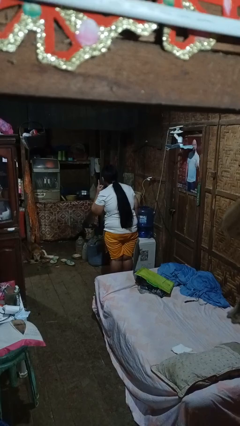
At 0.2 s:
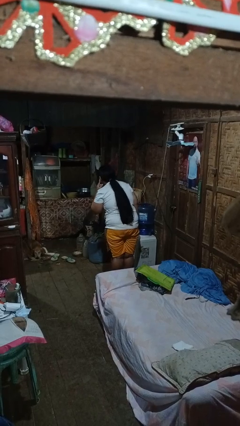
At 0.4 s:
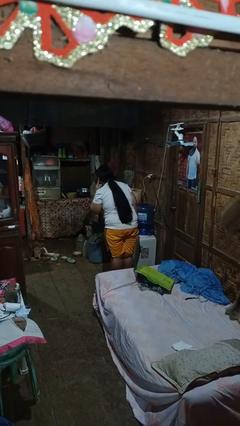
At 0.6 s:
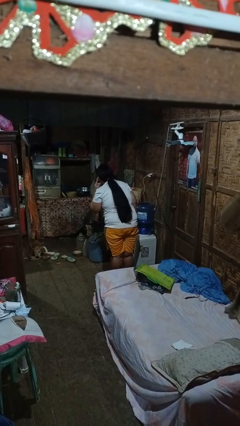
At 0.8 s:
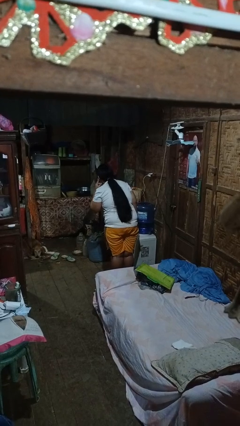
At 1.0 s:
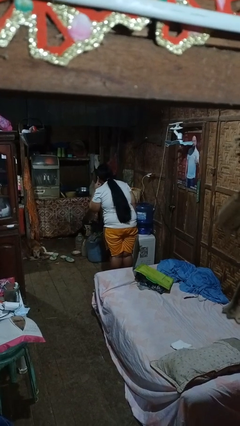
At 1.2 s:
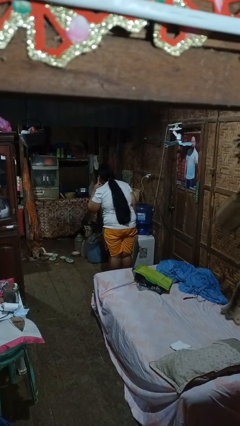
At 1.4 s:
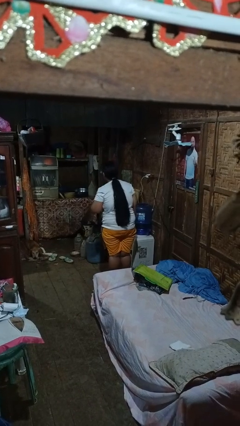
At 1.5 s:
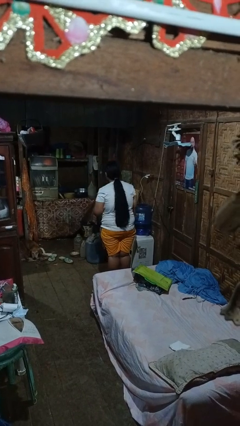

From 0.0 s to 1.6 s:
person gestures listen closely

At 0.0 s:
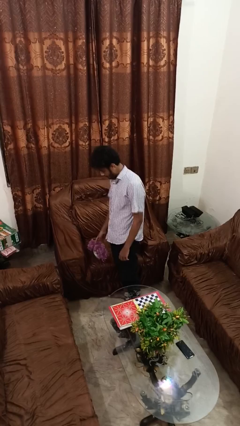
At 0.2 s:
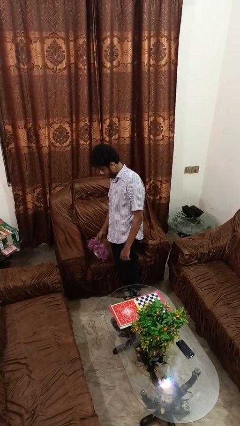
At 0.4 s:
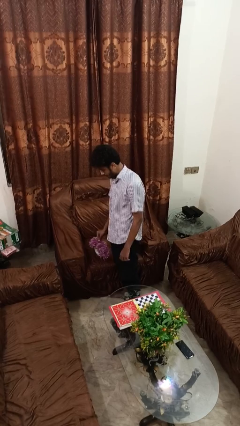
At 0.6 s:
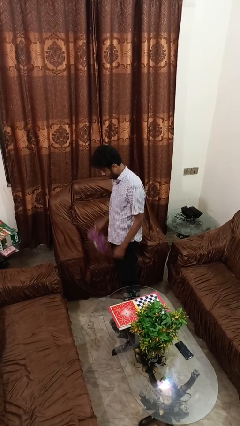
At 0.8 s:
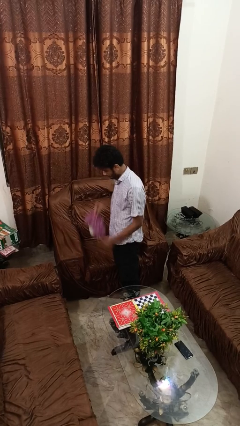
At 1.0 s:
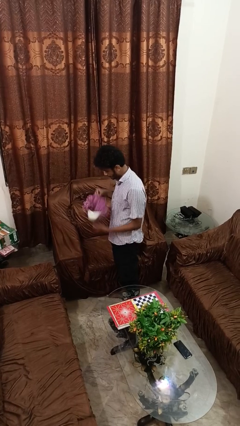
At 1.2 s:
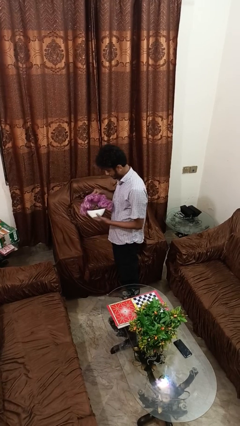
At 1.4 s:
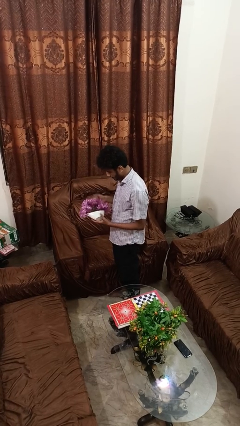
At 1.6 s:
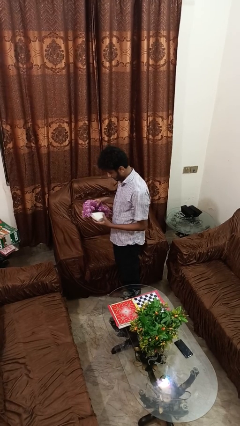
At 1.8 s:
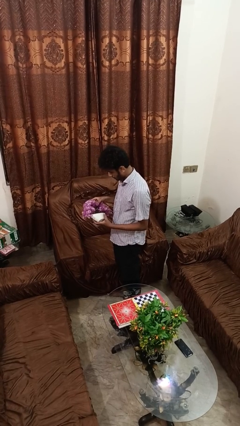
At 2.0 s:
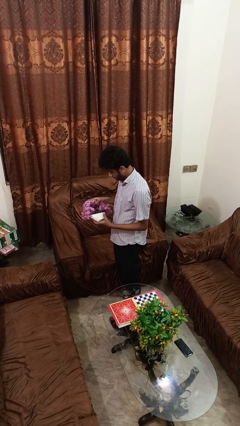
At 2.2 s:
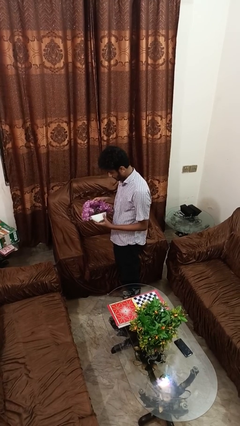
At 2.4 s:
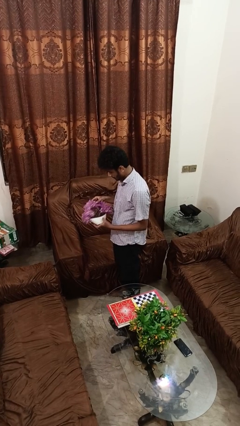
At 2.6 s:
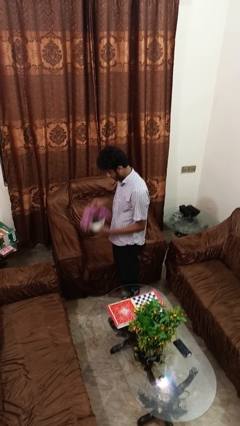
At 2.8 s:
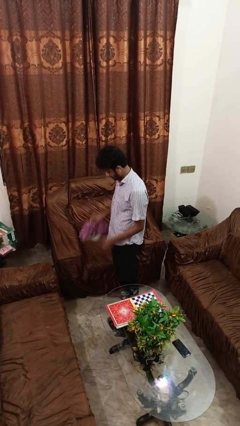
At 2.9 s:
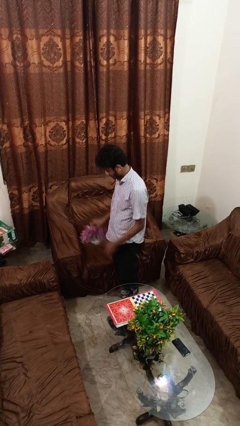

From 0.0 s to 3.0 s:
person picks up object from couch

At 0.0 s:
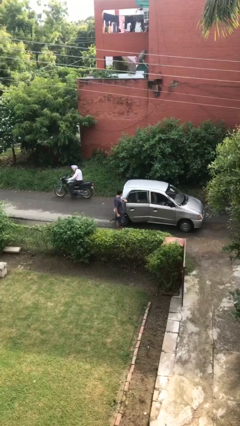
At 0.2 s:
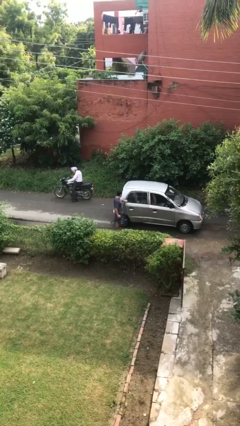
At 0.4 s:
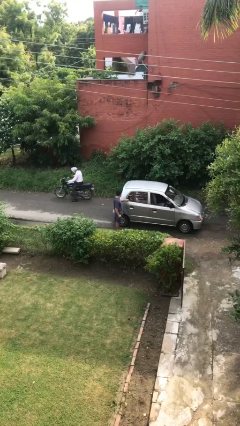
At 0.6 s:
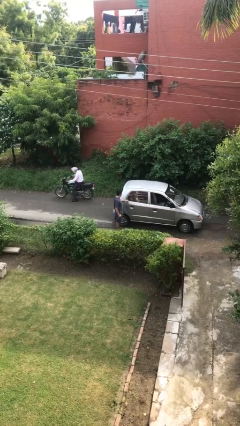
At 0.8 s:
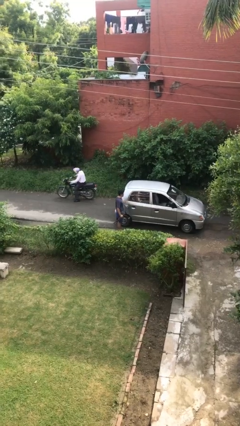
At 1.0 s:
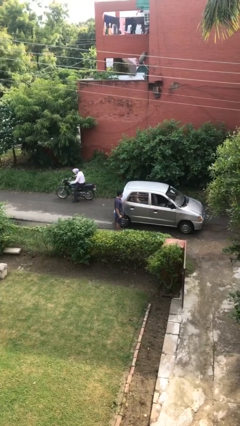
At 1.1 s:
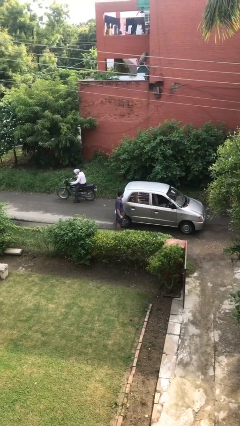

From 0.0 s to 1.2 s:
person closes car door

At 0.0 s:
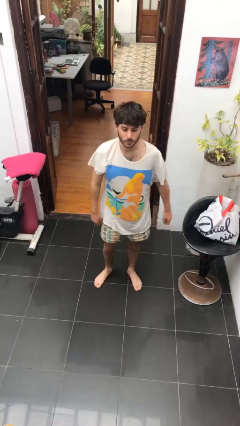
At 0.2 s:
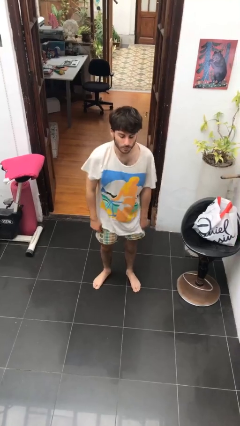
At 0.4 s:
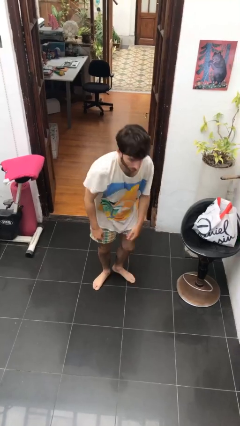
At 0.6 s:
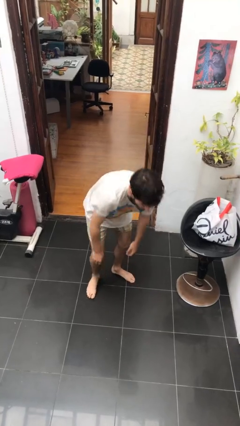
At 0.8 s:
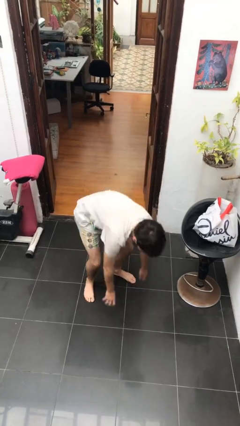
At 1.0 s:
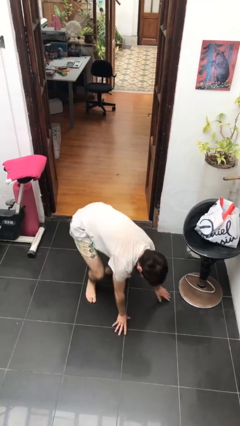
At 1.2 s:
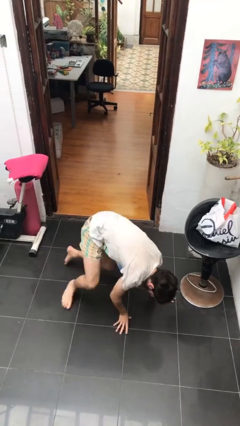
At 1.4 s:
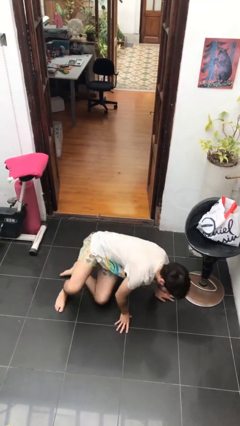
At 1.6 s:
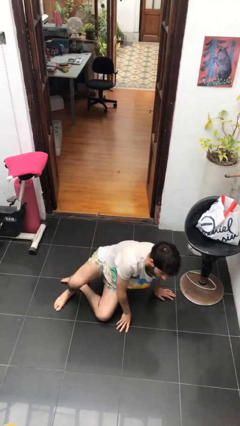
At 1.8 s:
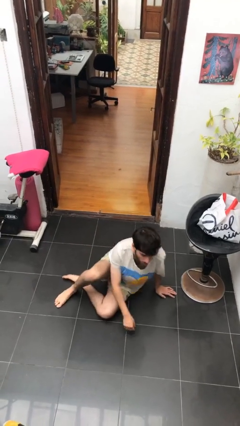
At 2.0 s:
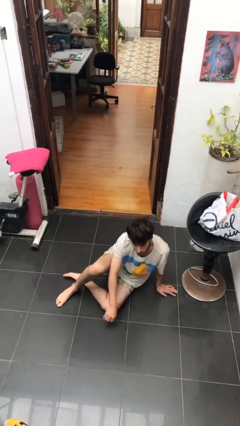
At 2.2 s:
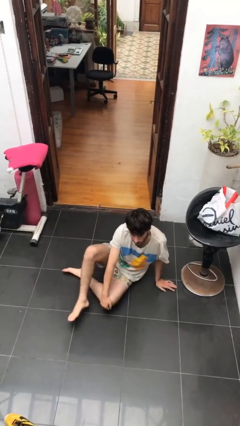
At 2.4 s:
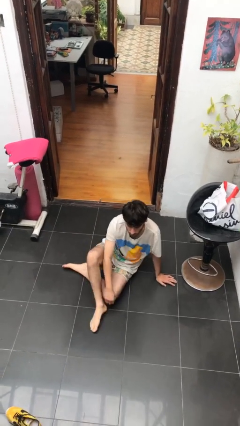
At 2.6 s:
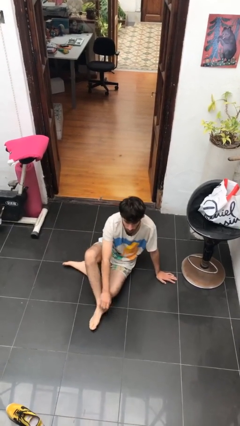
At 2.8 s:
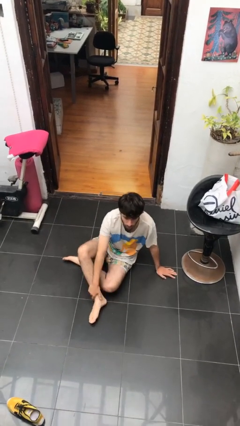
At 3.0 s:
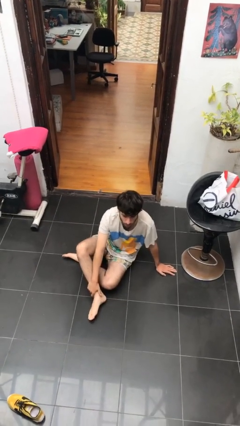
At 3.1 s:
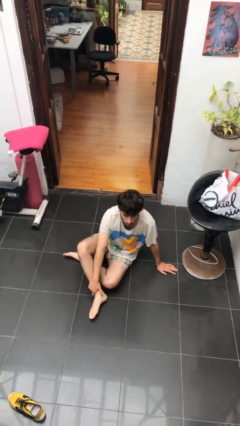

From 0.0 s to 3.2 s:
person sits down

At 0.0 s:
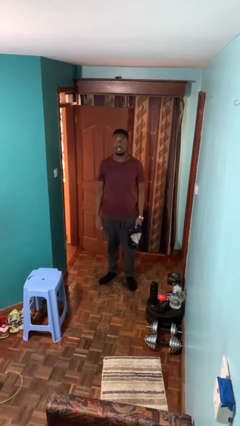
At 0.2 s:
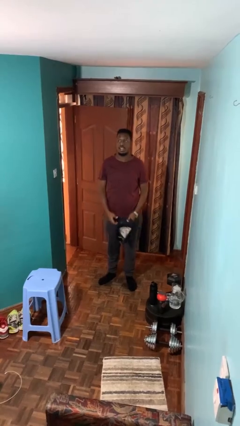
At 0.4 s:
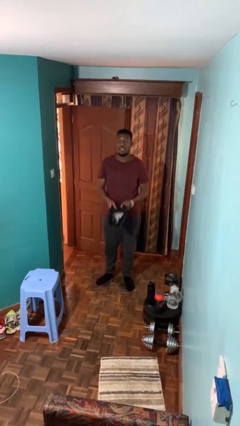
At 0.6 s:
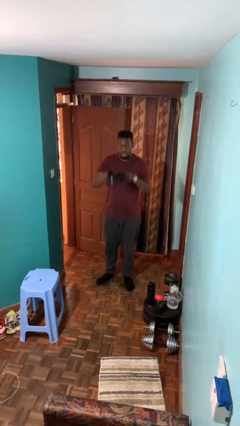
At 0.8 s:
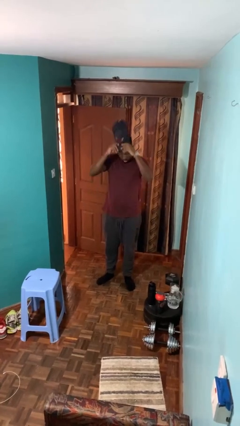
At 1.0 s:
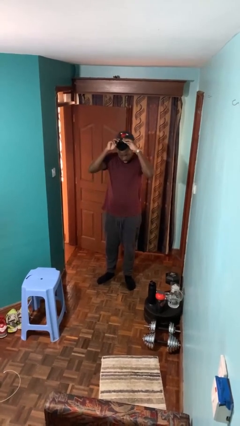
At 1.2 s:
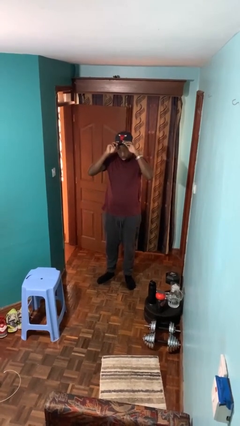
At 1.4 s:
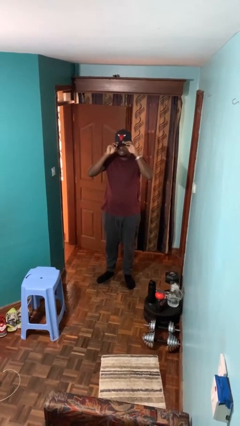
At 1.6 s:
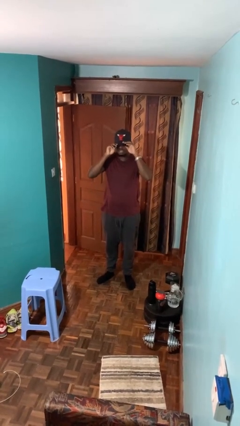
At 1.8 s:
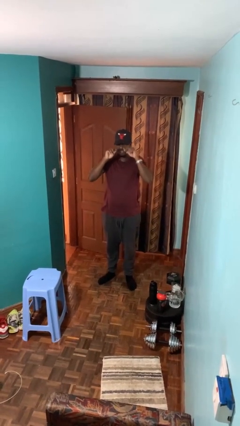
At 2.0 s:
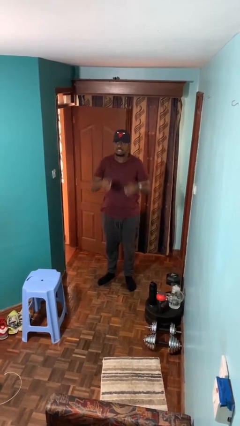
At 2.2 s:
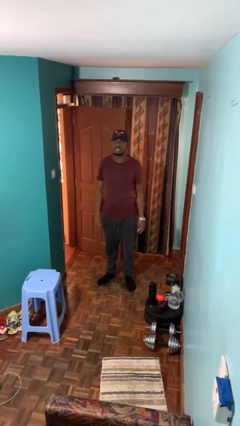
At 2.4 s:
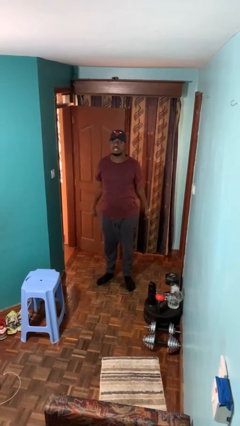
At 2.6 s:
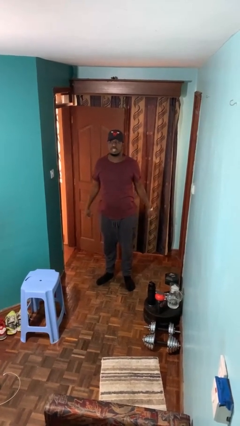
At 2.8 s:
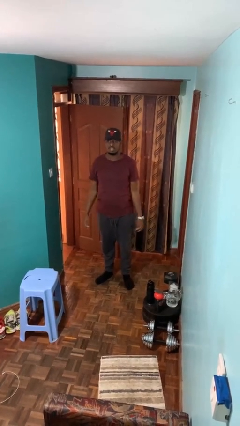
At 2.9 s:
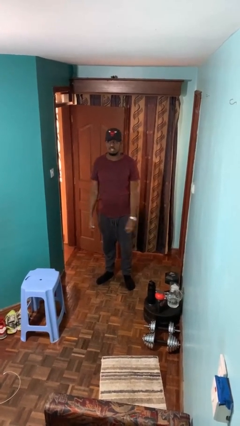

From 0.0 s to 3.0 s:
person puts on hat

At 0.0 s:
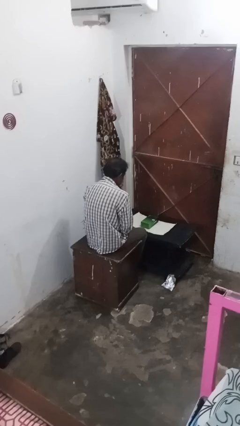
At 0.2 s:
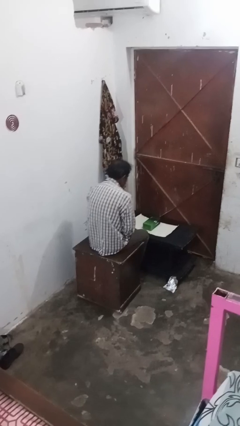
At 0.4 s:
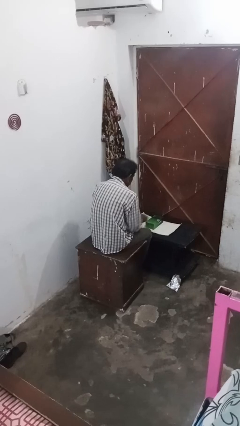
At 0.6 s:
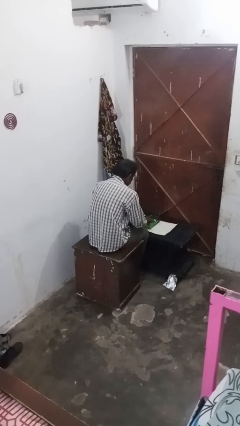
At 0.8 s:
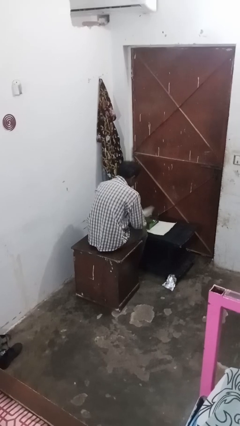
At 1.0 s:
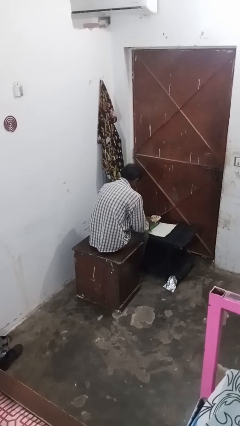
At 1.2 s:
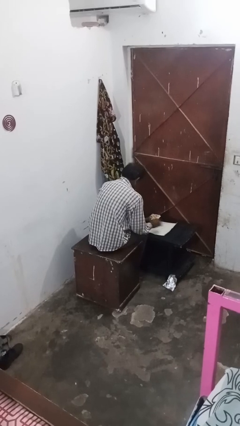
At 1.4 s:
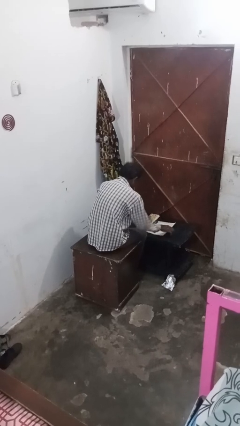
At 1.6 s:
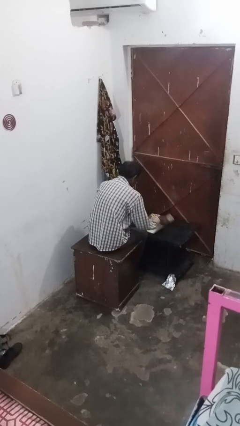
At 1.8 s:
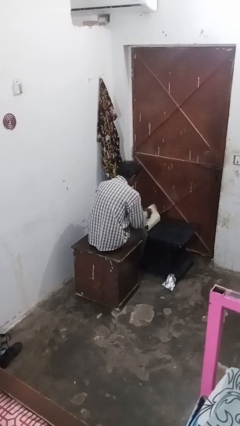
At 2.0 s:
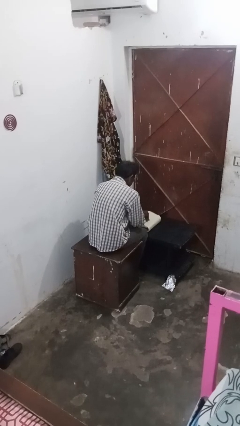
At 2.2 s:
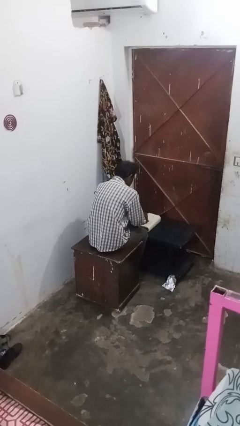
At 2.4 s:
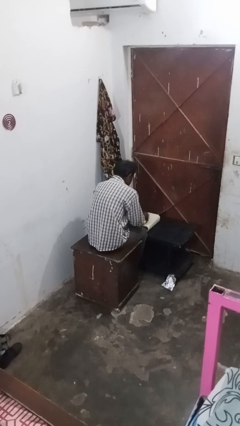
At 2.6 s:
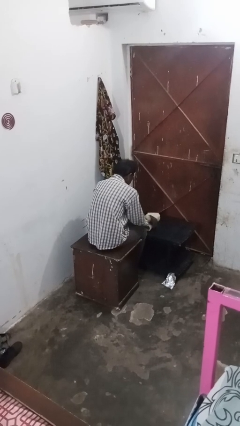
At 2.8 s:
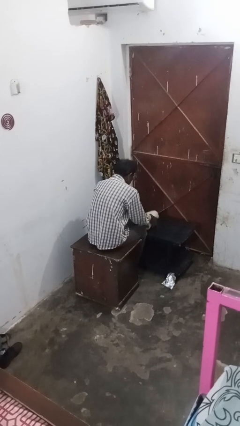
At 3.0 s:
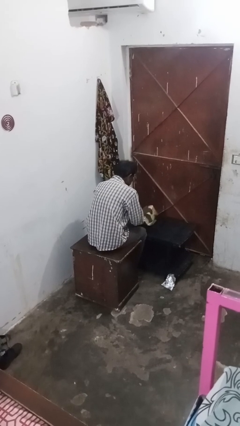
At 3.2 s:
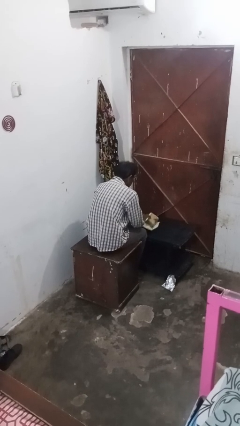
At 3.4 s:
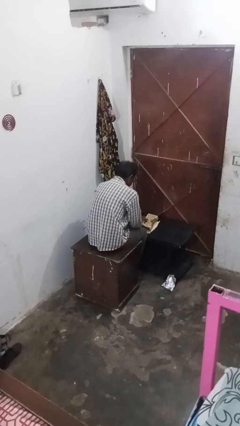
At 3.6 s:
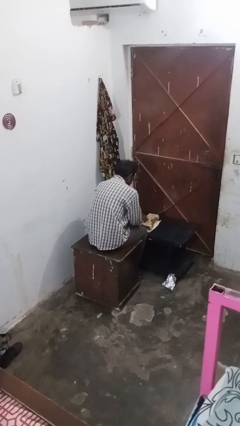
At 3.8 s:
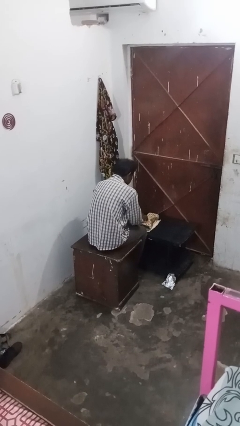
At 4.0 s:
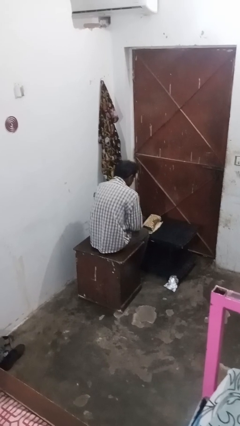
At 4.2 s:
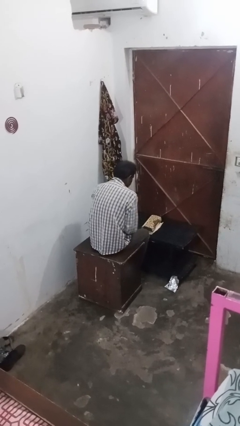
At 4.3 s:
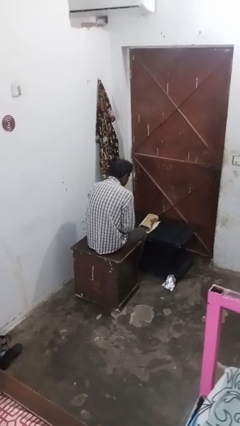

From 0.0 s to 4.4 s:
person wraps box

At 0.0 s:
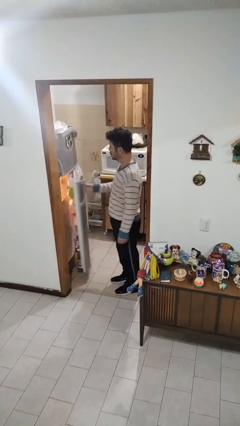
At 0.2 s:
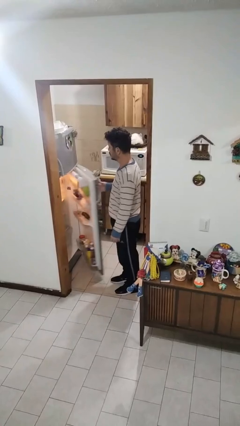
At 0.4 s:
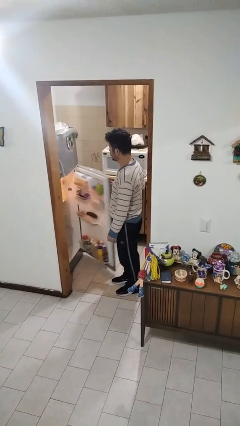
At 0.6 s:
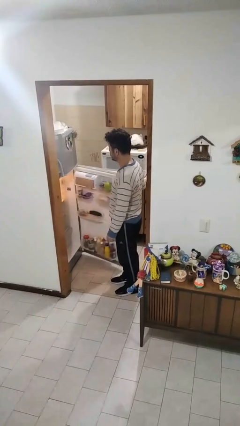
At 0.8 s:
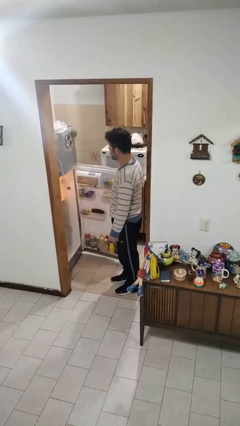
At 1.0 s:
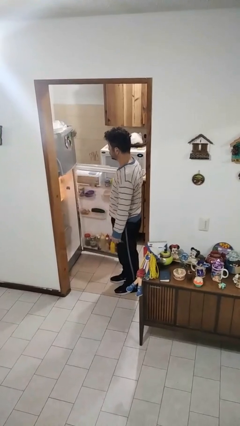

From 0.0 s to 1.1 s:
person opens refrigerator
